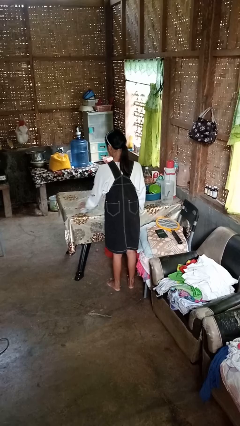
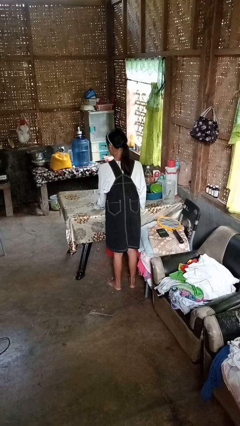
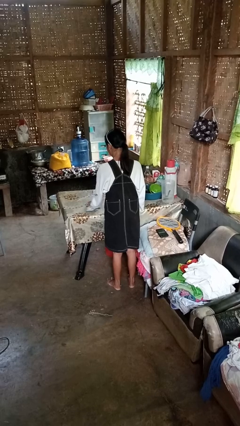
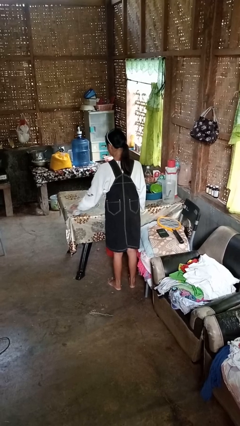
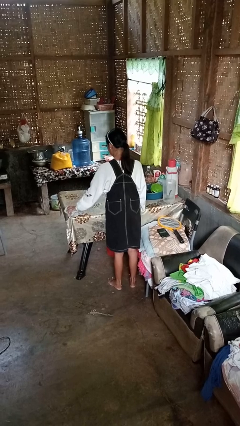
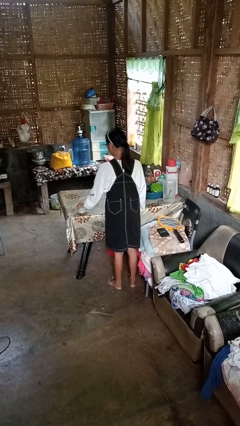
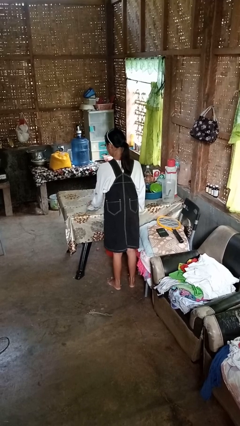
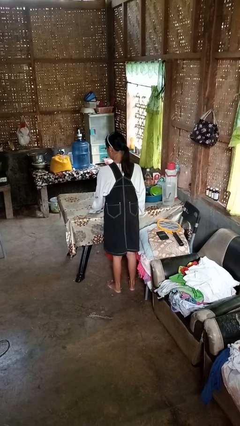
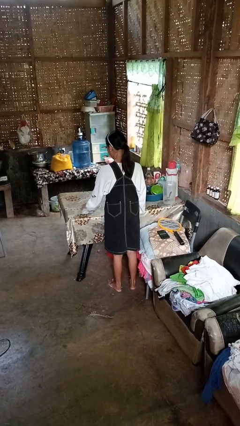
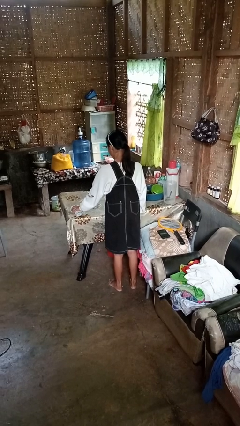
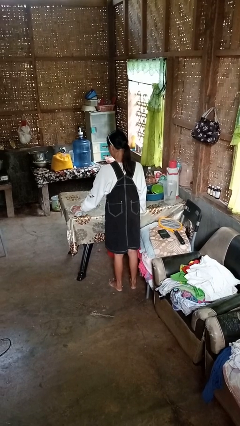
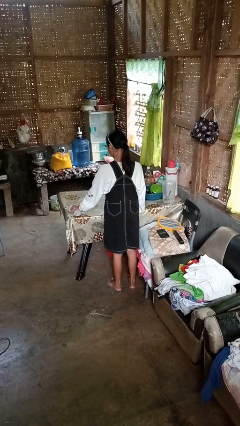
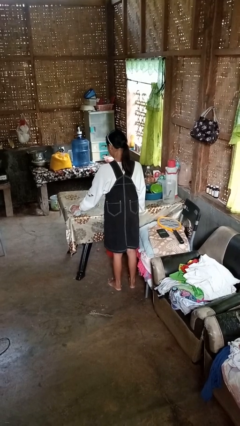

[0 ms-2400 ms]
person cleans table with rag

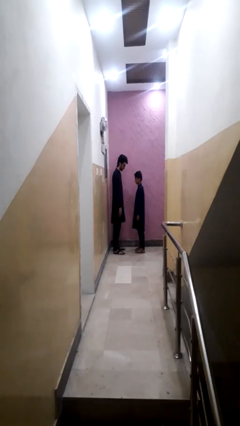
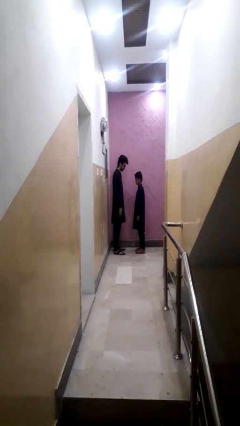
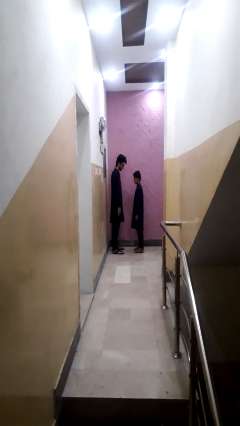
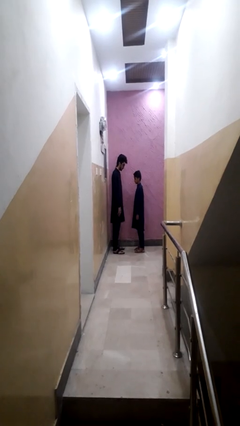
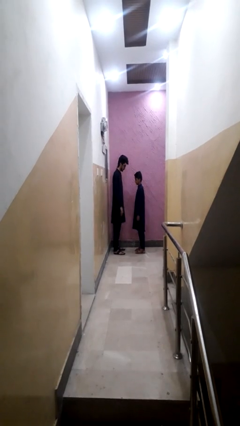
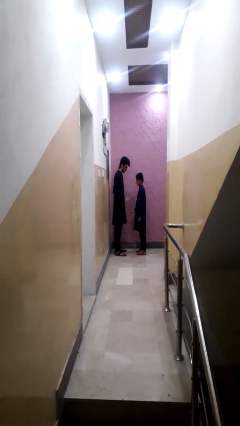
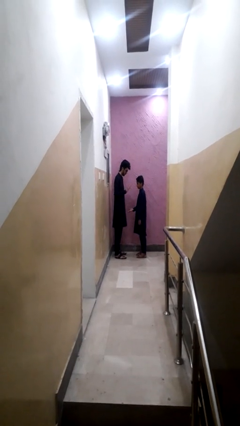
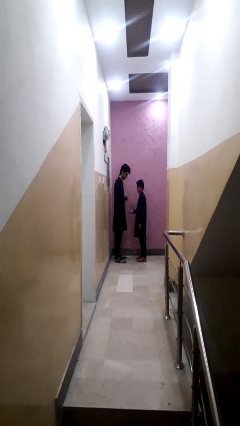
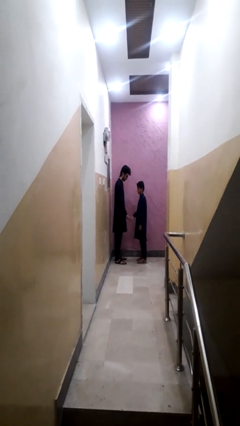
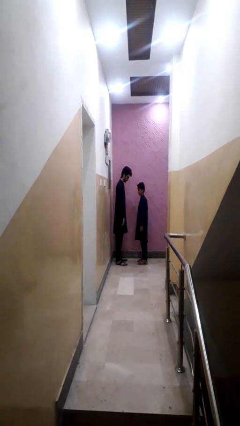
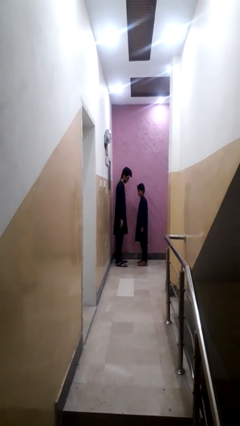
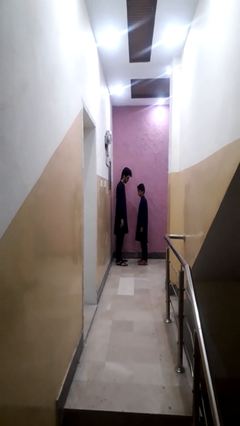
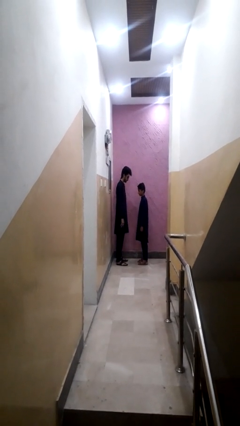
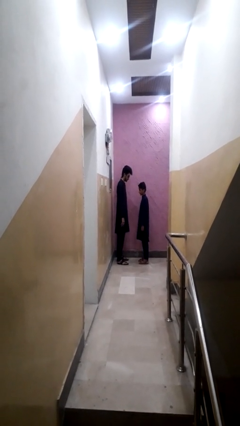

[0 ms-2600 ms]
person highfives hand

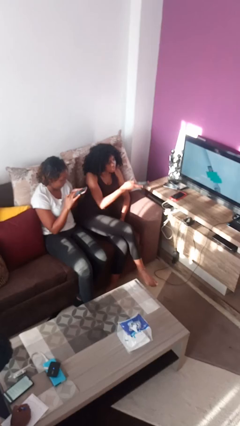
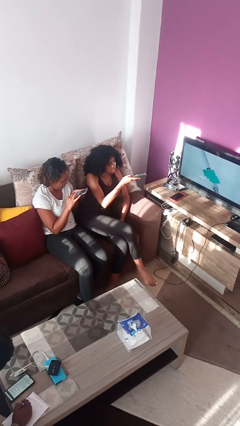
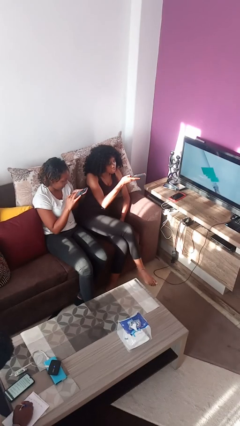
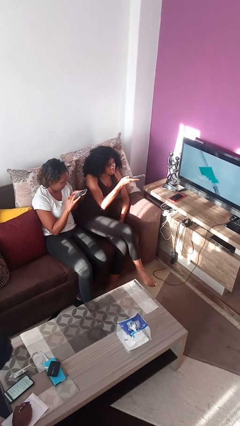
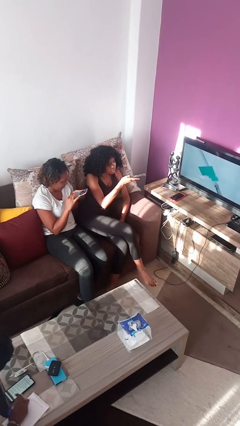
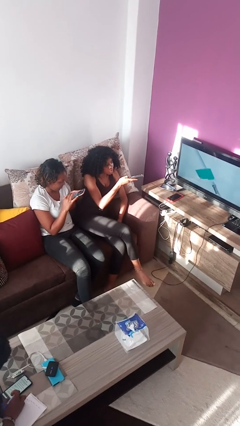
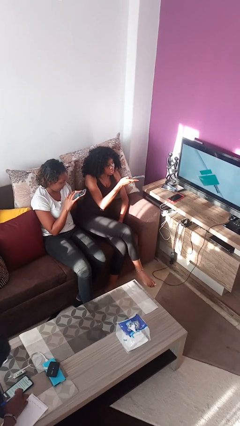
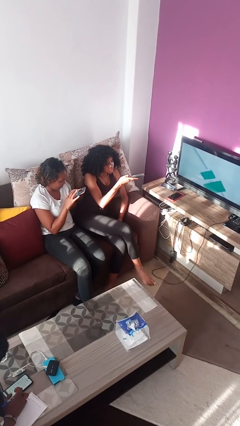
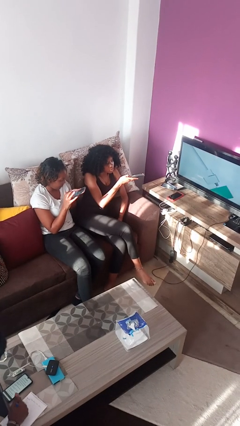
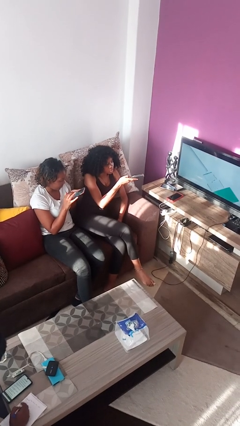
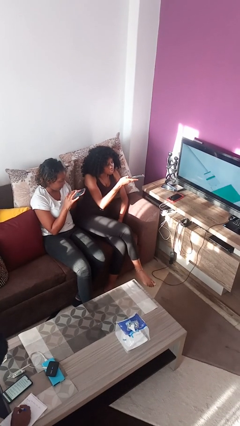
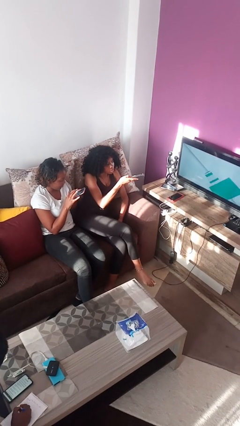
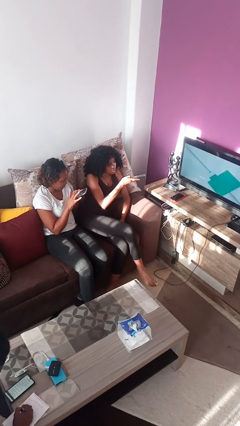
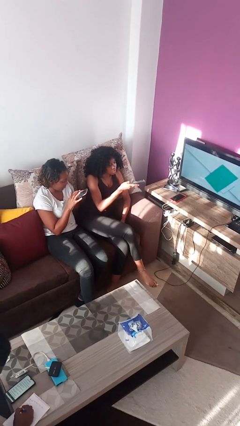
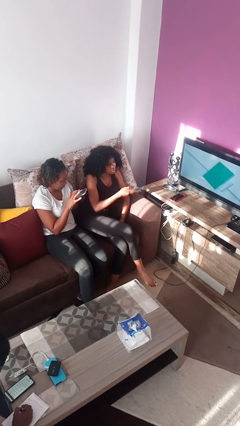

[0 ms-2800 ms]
person uses television remote

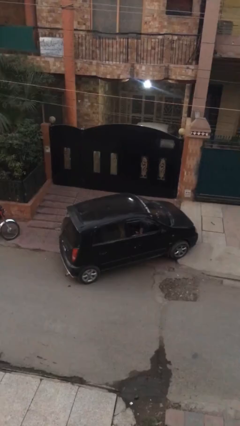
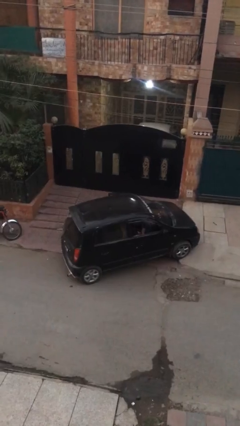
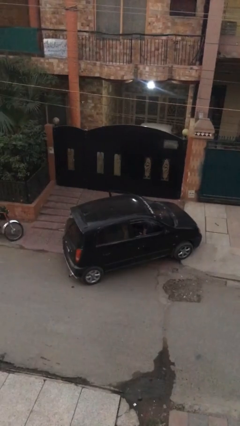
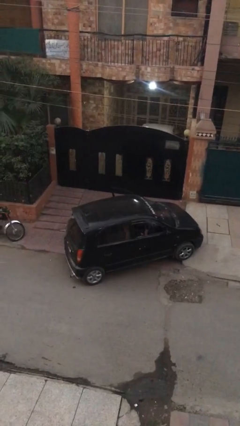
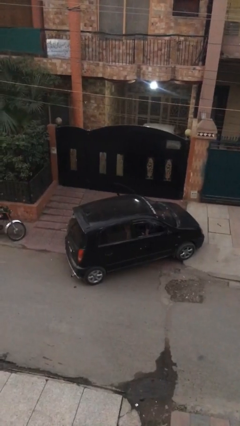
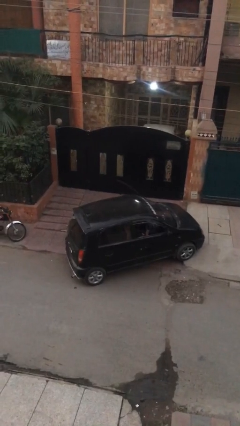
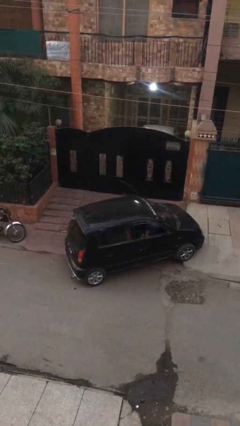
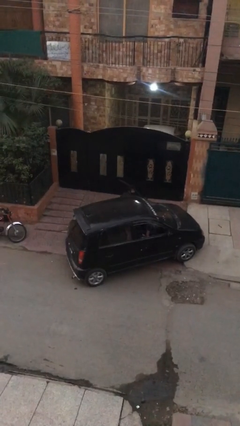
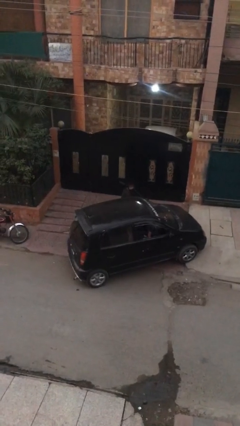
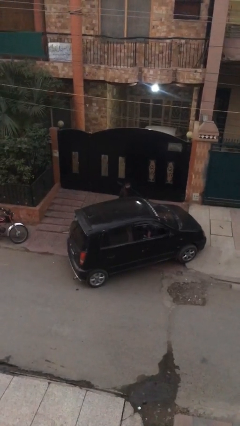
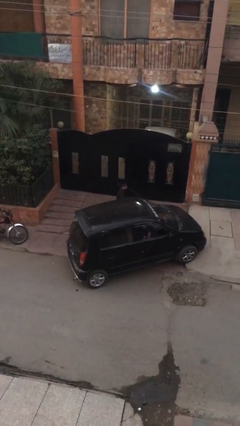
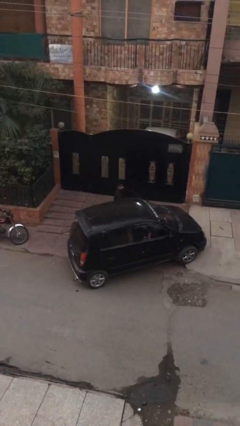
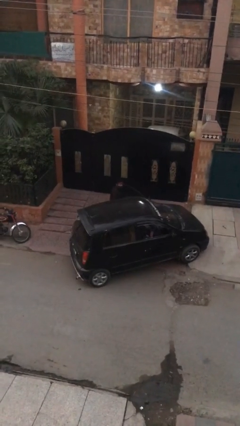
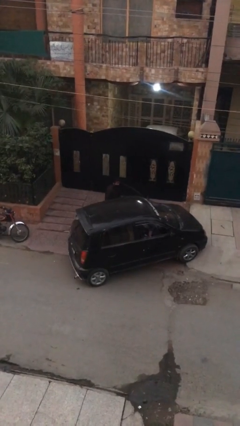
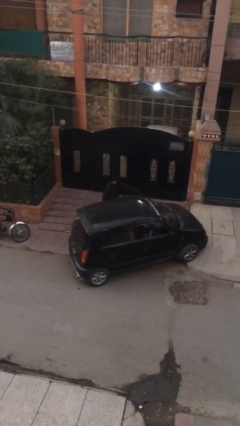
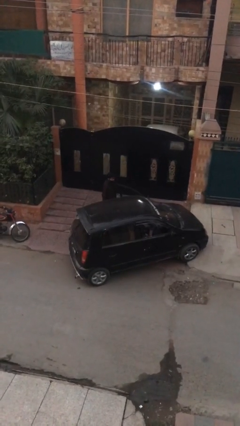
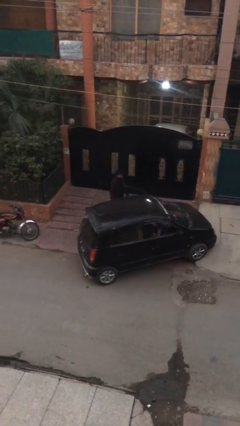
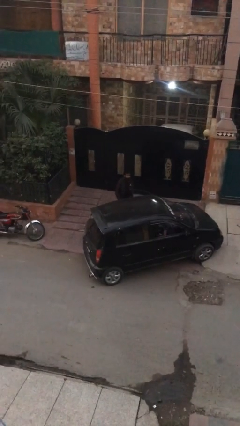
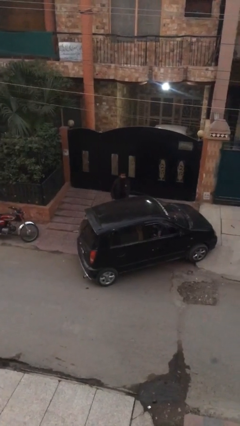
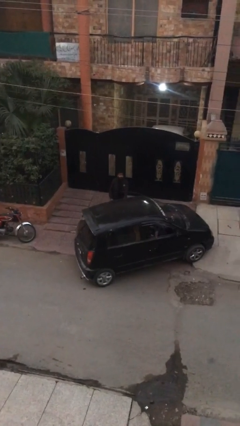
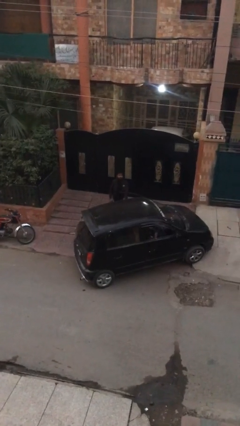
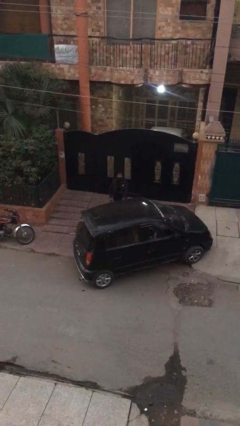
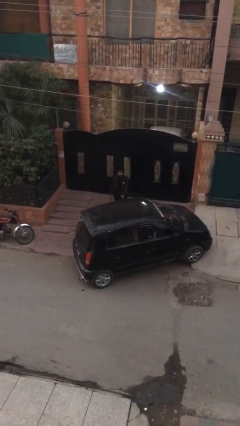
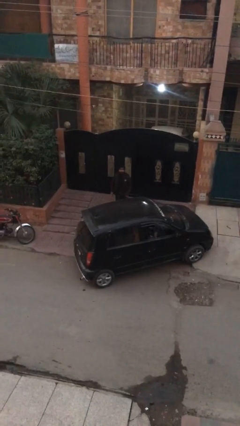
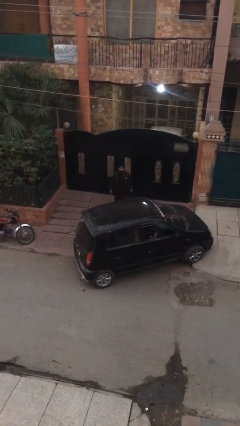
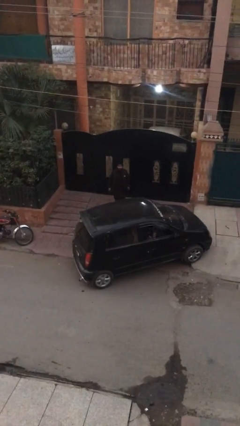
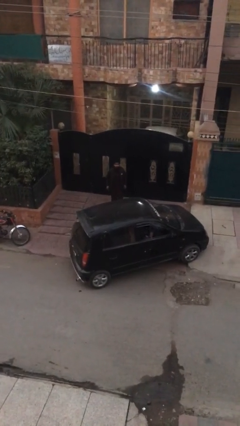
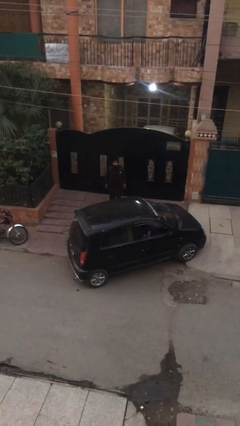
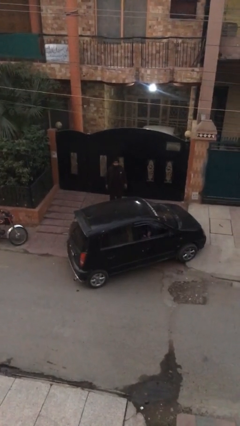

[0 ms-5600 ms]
car drops off person

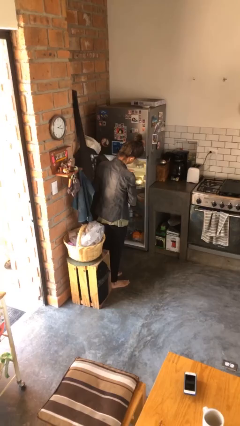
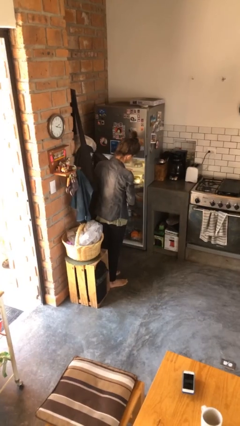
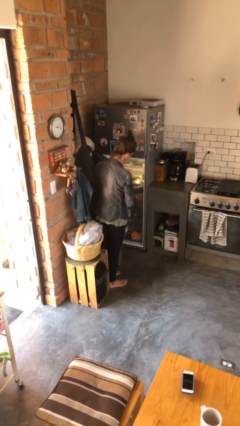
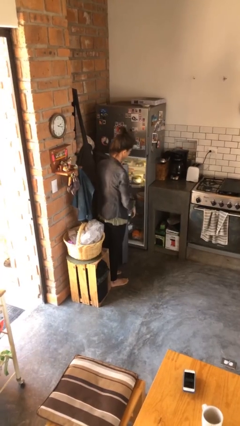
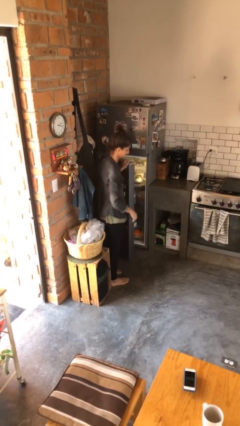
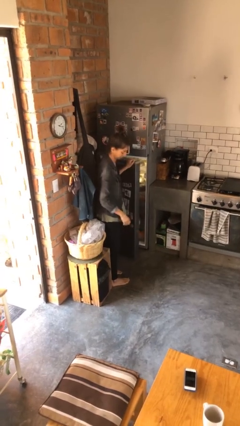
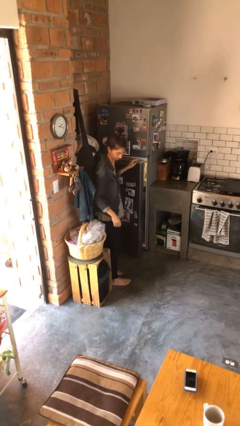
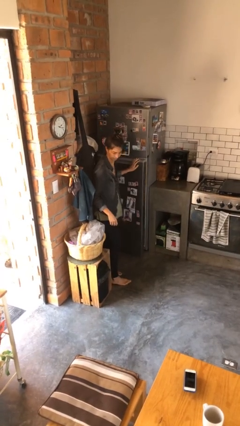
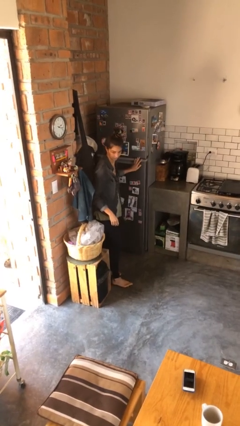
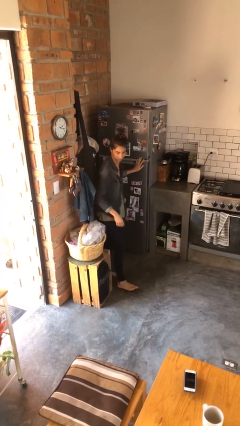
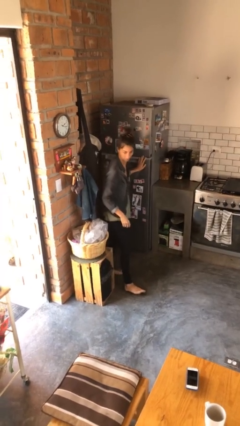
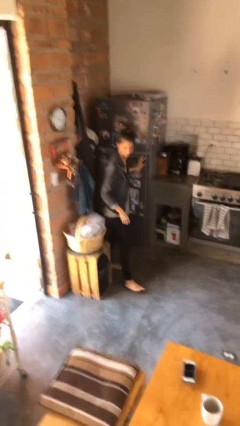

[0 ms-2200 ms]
person closes refrigerator

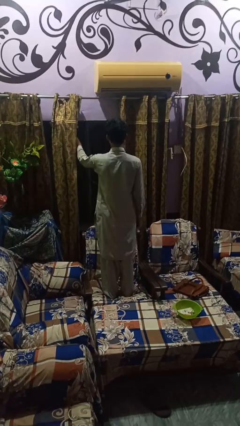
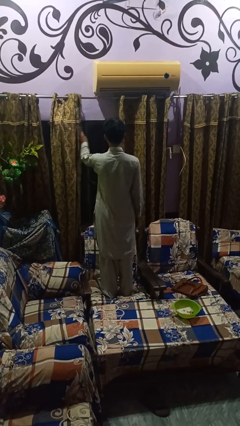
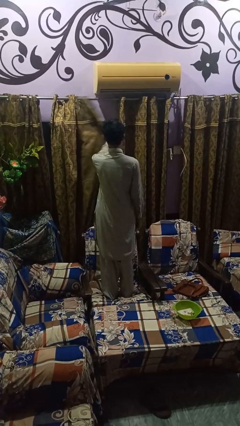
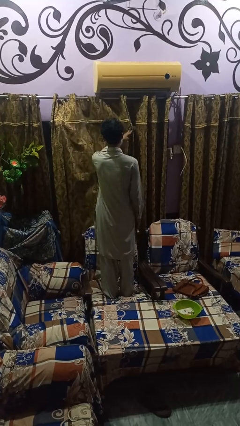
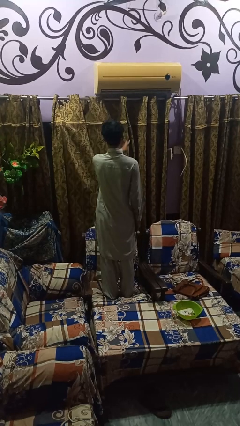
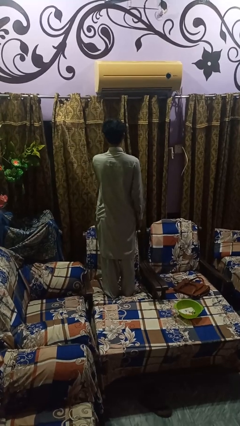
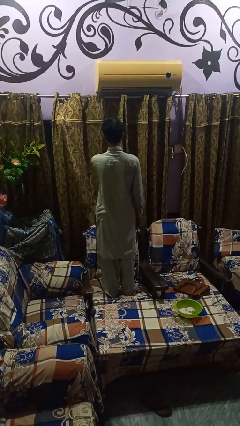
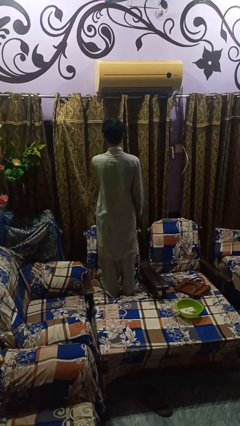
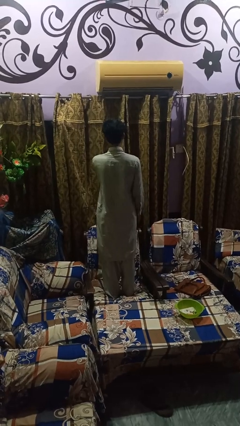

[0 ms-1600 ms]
person closes curtains

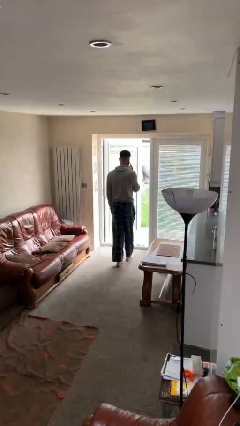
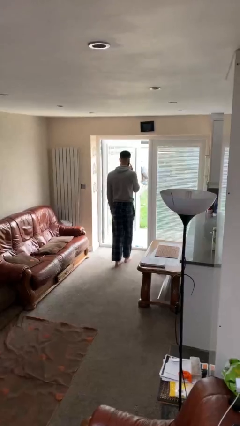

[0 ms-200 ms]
person exits scene through structure
